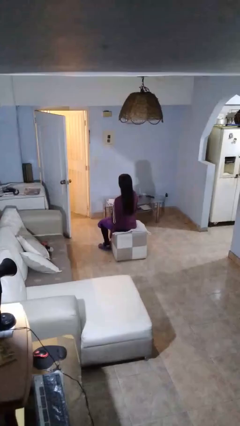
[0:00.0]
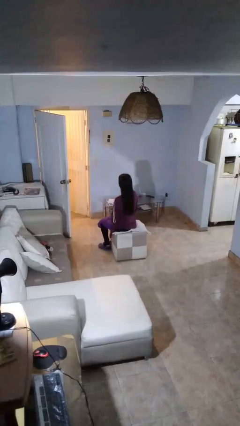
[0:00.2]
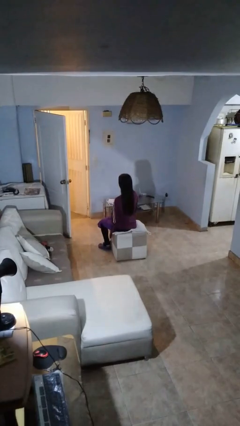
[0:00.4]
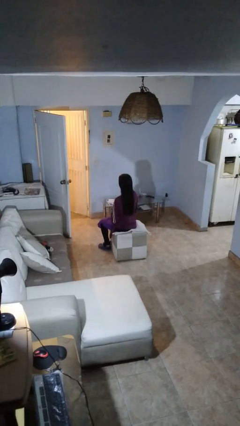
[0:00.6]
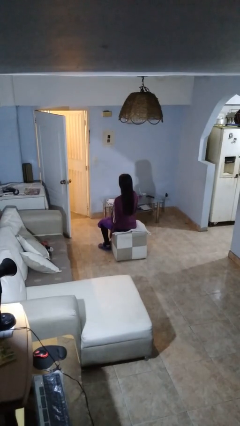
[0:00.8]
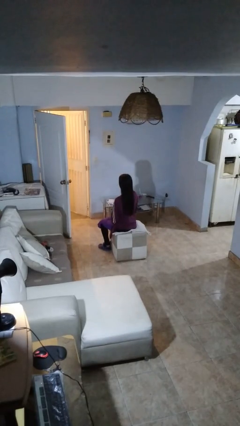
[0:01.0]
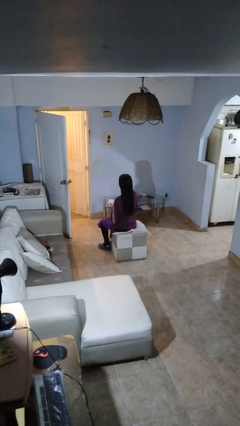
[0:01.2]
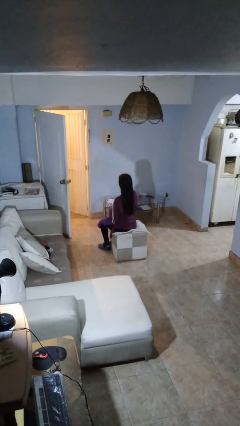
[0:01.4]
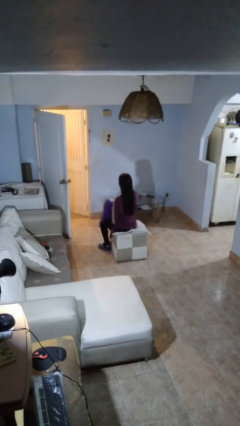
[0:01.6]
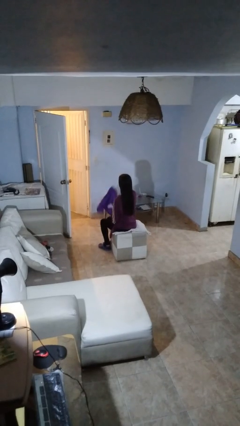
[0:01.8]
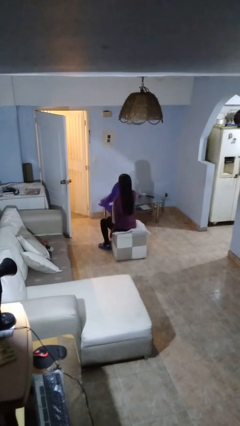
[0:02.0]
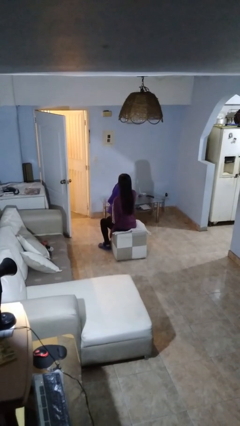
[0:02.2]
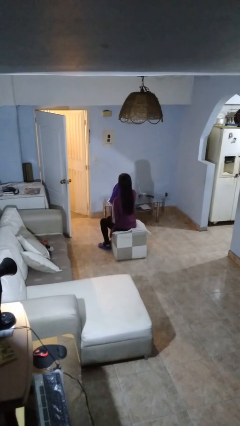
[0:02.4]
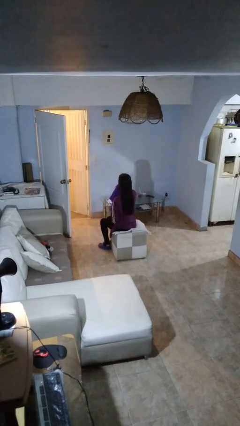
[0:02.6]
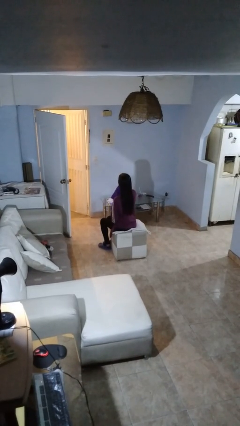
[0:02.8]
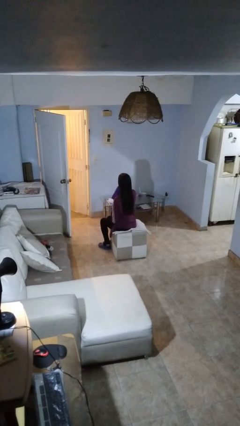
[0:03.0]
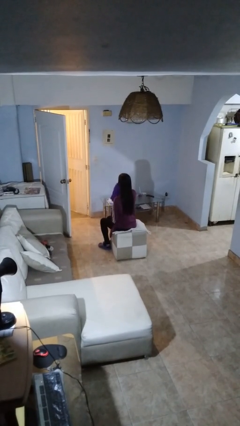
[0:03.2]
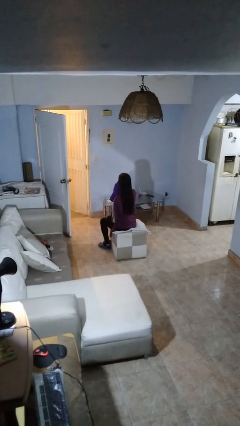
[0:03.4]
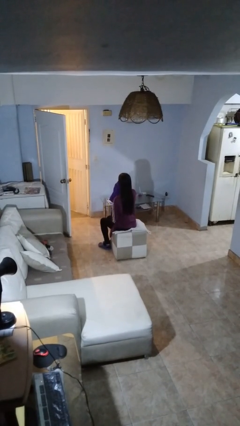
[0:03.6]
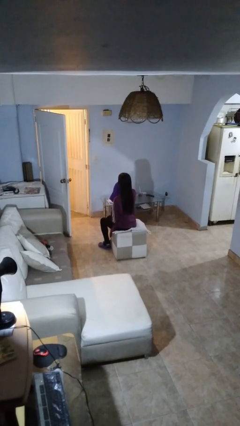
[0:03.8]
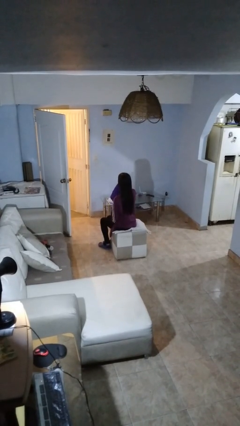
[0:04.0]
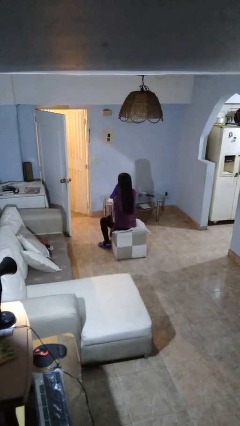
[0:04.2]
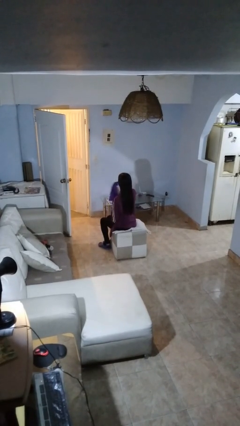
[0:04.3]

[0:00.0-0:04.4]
person wipes mouth with napkin

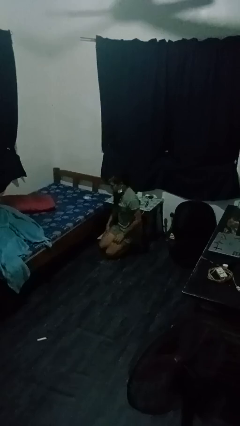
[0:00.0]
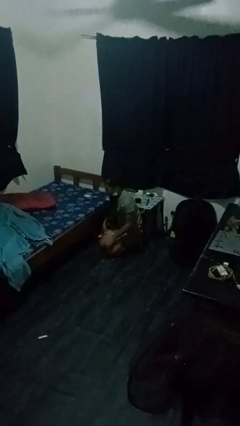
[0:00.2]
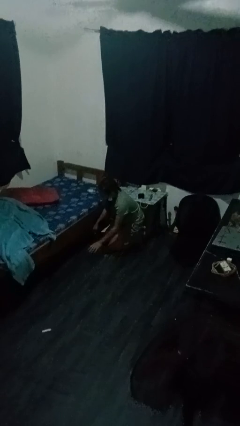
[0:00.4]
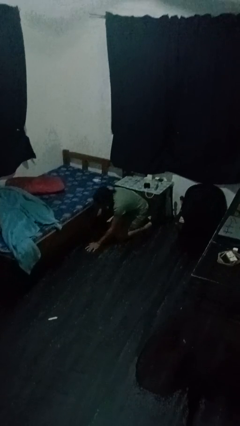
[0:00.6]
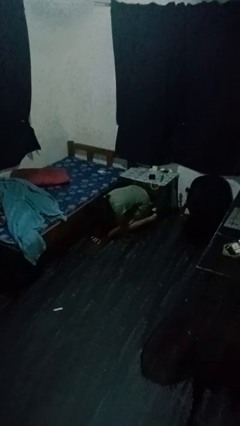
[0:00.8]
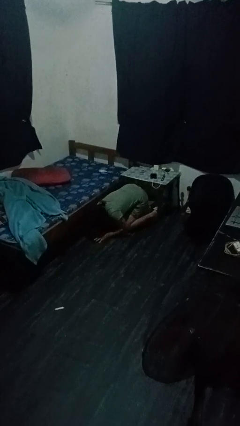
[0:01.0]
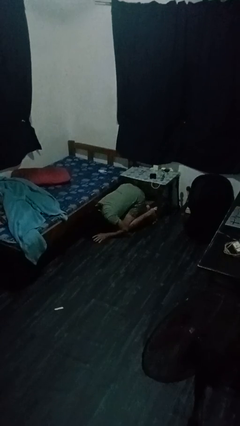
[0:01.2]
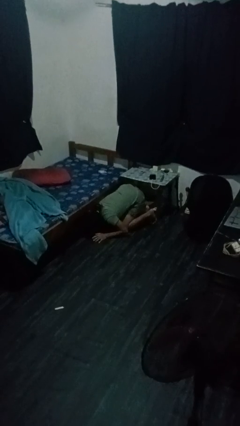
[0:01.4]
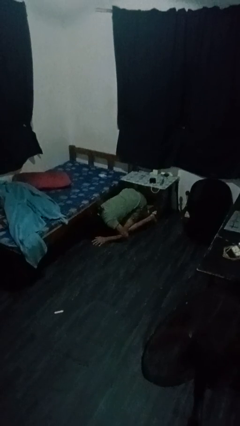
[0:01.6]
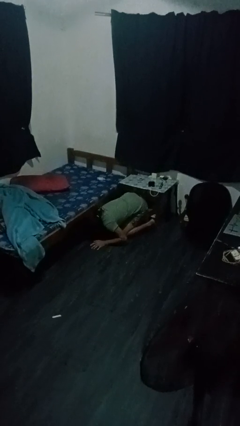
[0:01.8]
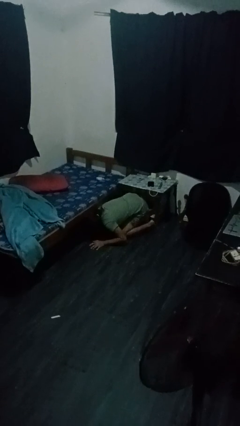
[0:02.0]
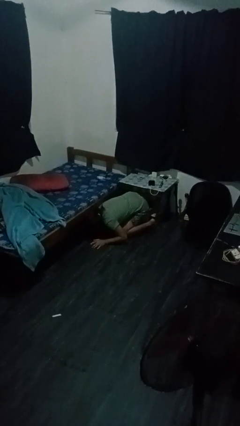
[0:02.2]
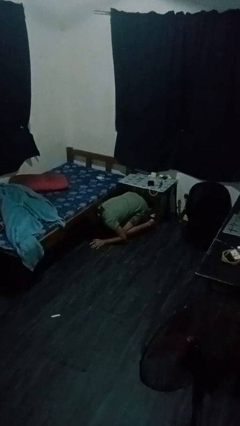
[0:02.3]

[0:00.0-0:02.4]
person searches under bed

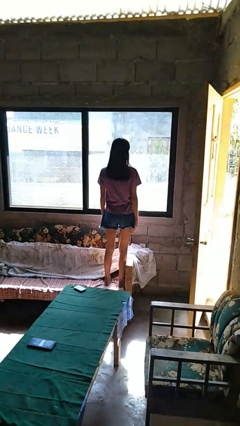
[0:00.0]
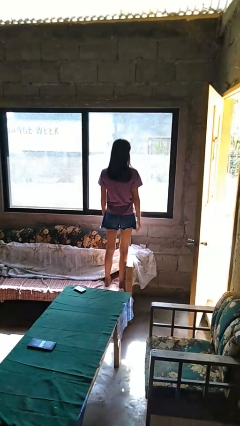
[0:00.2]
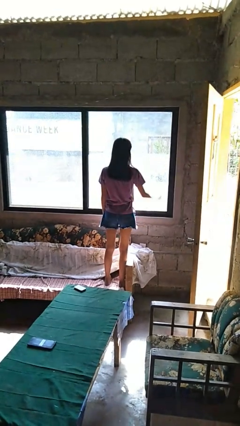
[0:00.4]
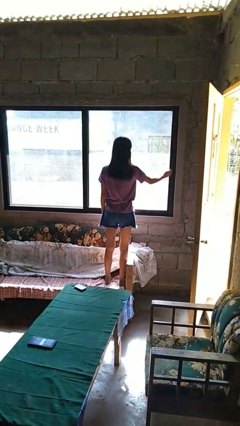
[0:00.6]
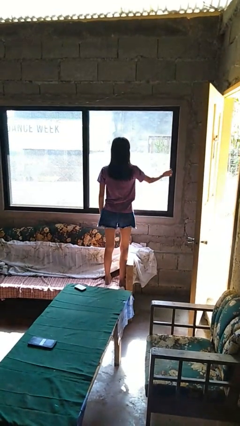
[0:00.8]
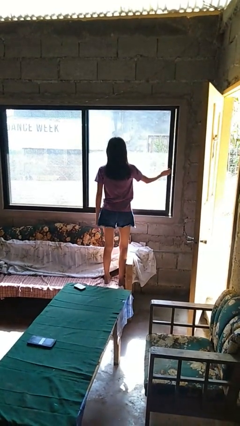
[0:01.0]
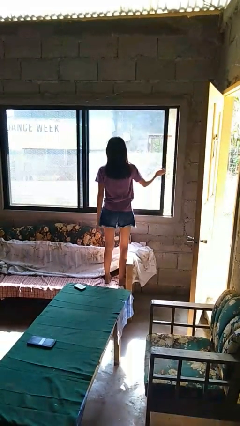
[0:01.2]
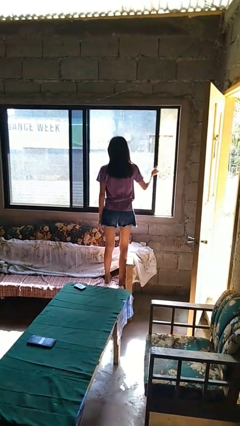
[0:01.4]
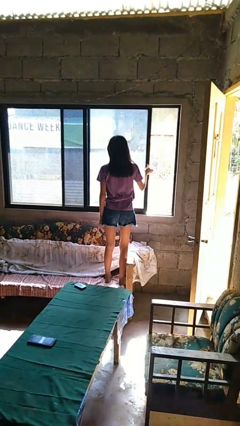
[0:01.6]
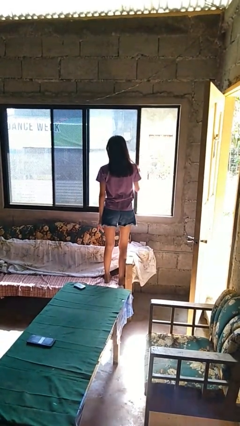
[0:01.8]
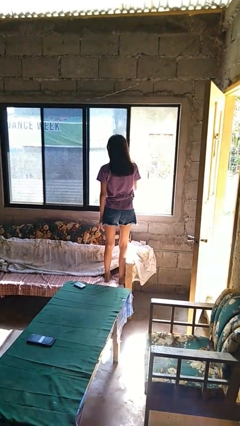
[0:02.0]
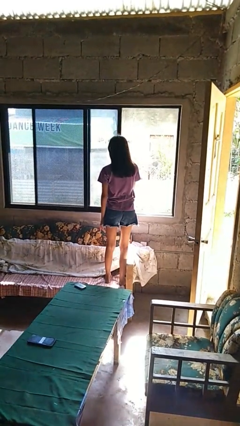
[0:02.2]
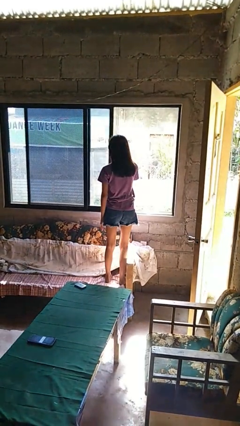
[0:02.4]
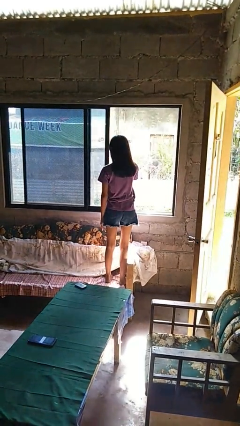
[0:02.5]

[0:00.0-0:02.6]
person opens home window

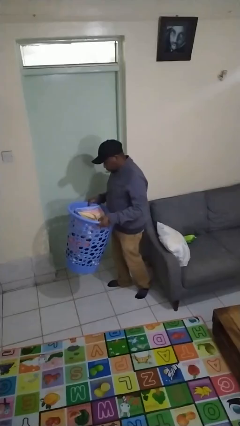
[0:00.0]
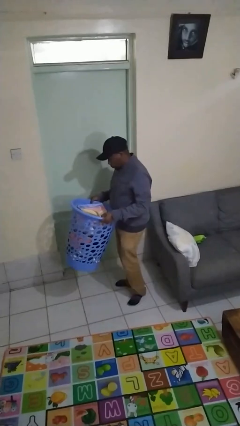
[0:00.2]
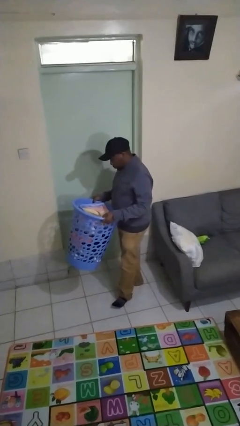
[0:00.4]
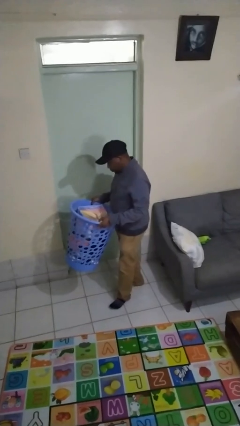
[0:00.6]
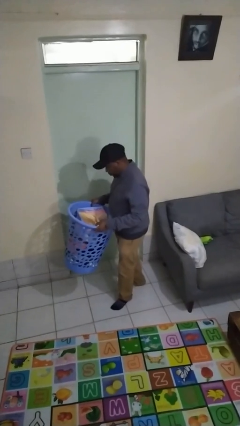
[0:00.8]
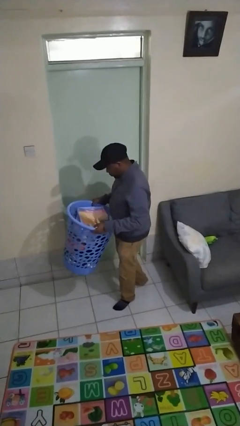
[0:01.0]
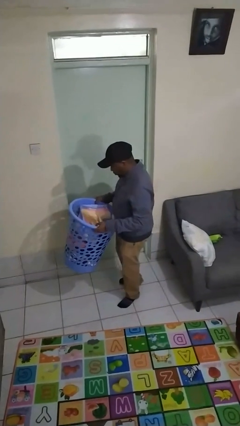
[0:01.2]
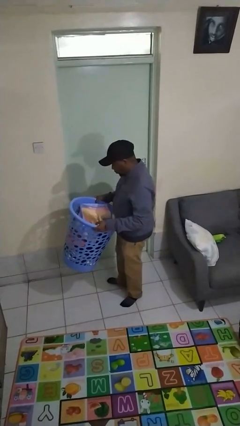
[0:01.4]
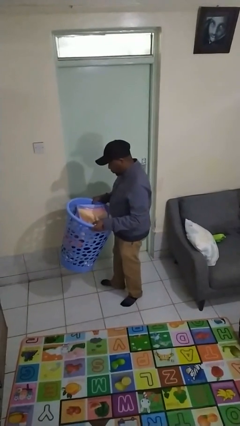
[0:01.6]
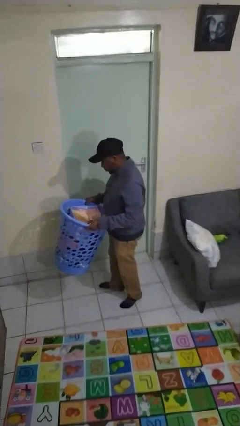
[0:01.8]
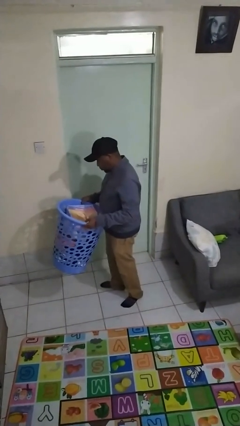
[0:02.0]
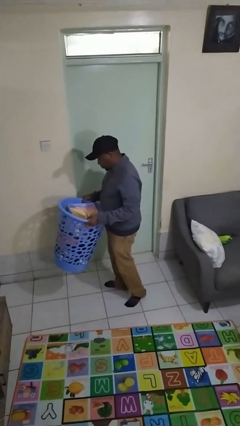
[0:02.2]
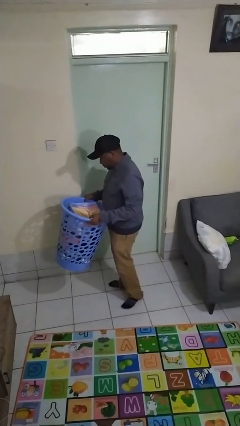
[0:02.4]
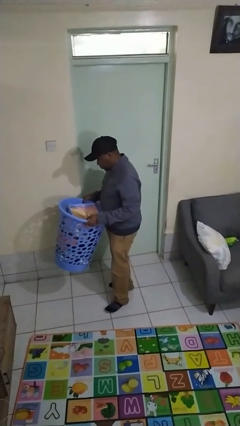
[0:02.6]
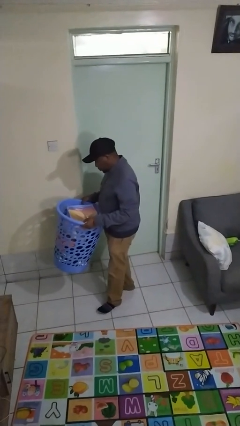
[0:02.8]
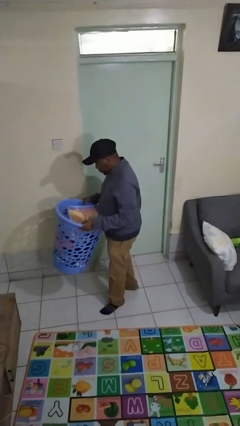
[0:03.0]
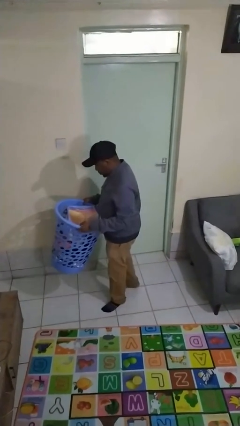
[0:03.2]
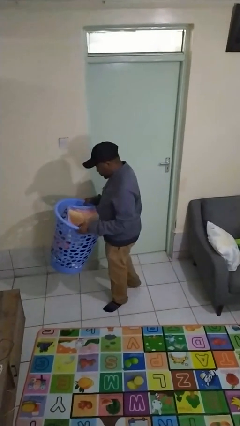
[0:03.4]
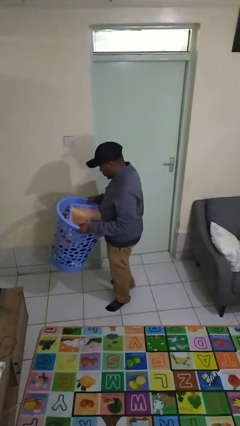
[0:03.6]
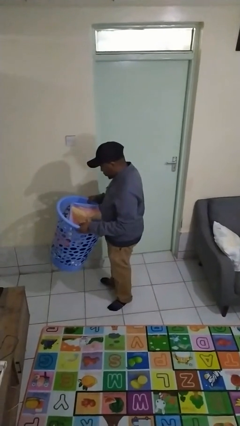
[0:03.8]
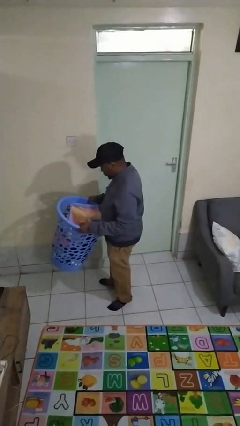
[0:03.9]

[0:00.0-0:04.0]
person carries laundry basket

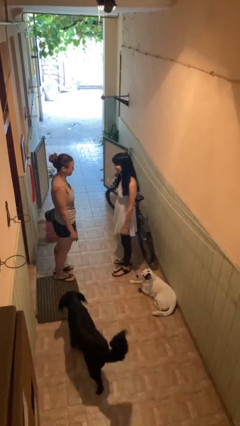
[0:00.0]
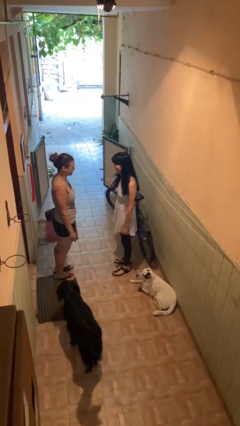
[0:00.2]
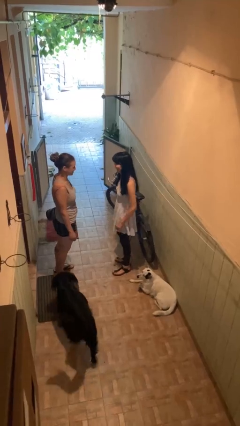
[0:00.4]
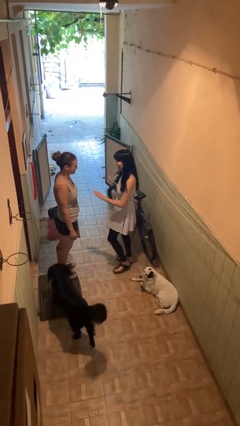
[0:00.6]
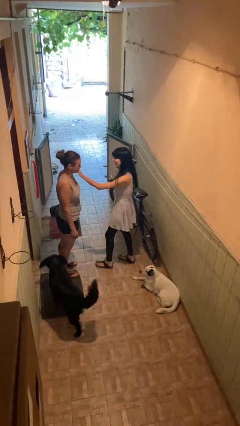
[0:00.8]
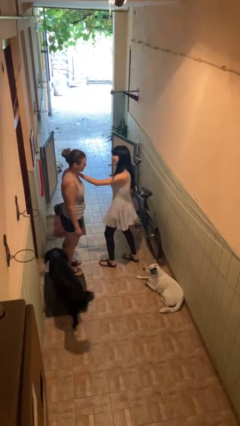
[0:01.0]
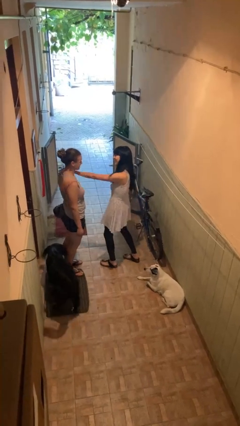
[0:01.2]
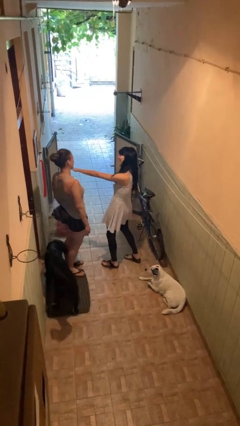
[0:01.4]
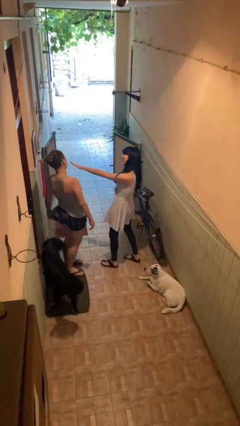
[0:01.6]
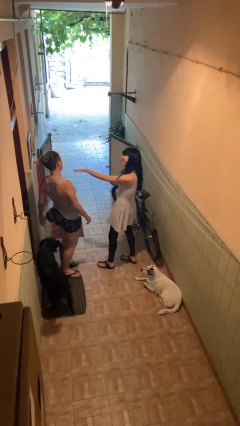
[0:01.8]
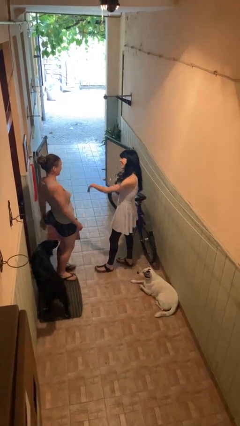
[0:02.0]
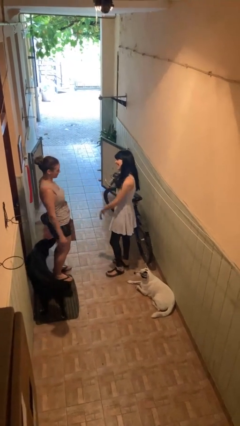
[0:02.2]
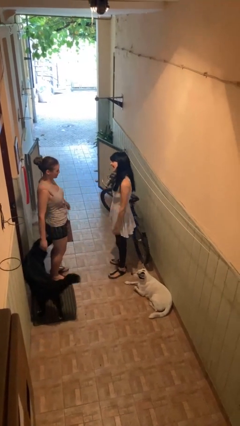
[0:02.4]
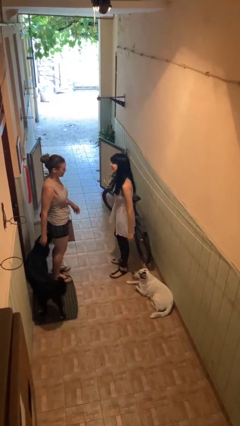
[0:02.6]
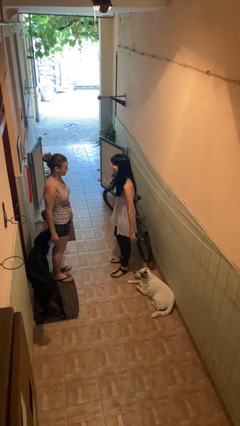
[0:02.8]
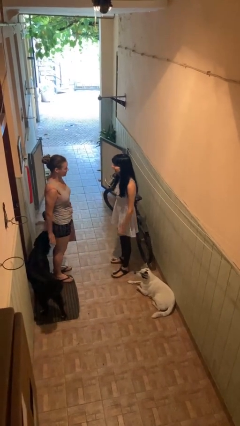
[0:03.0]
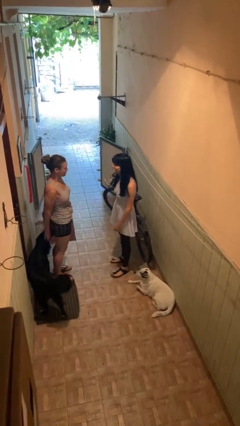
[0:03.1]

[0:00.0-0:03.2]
person shoves person

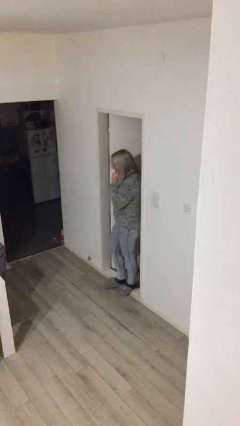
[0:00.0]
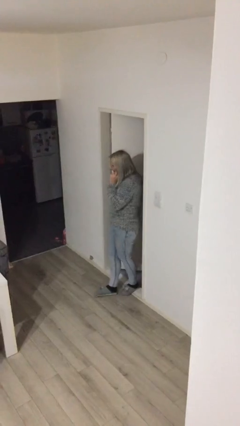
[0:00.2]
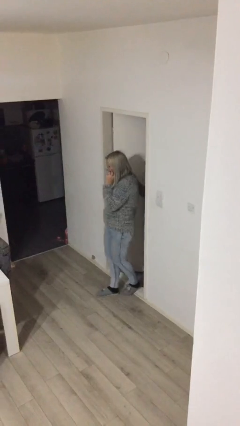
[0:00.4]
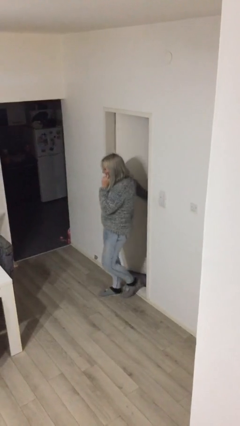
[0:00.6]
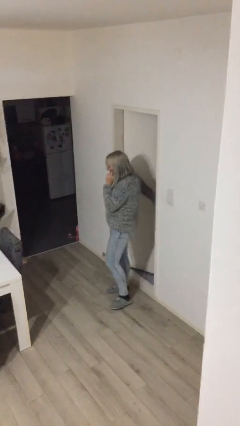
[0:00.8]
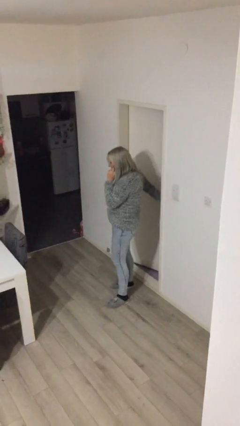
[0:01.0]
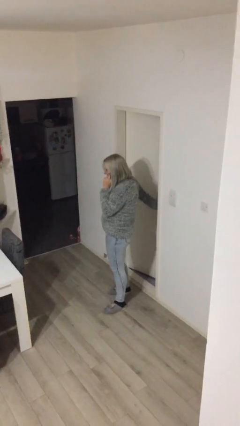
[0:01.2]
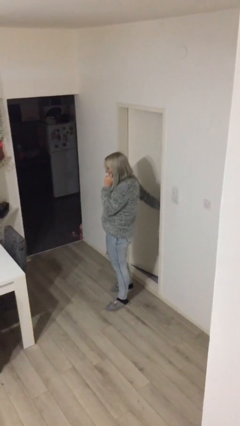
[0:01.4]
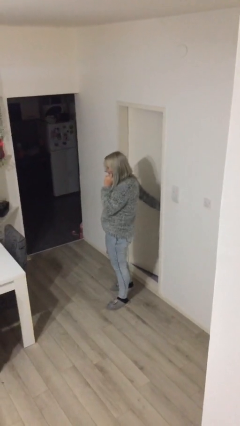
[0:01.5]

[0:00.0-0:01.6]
person enters scene through structure
